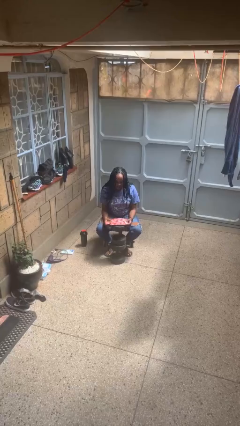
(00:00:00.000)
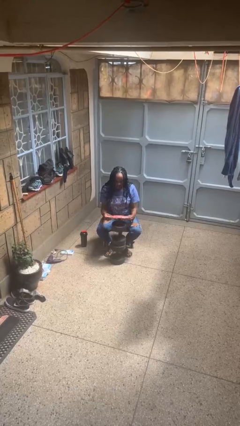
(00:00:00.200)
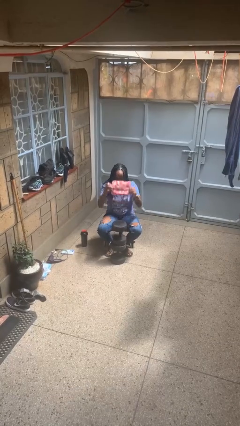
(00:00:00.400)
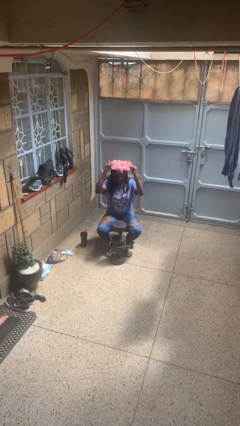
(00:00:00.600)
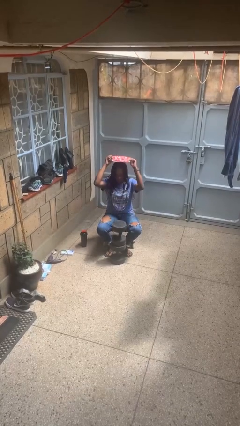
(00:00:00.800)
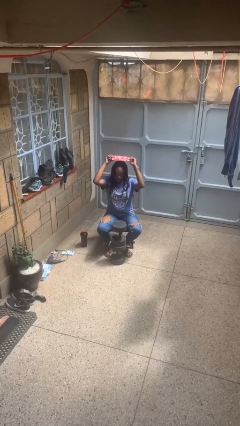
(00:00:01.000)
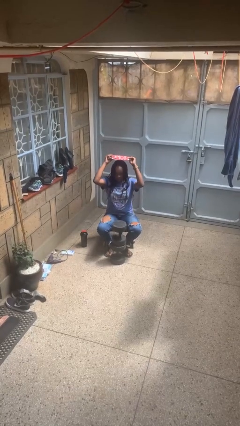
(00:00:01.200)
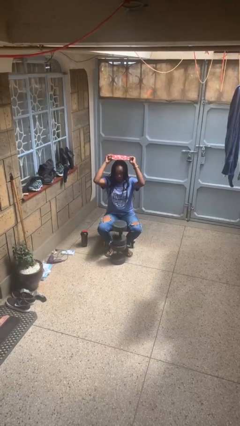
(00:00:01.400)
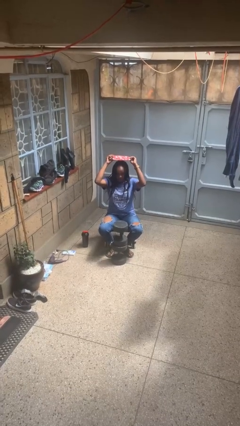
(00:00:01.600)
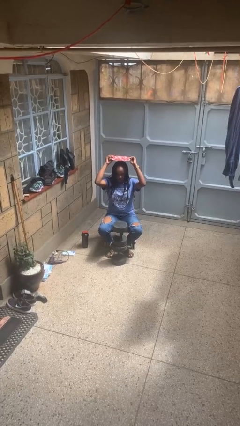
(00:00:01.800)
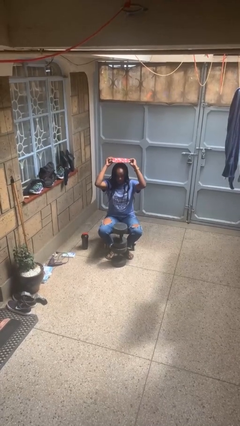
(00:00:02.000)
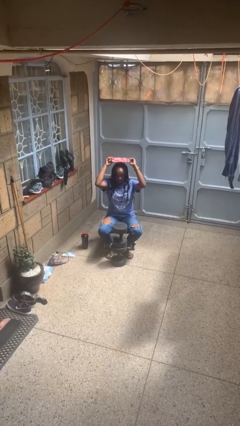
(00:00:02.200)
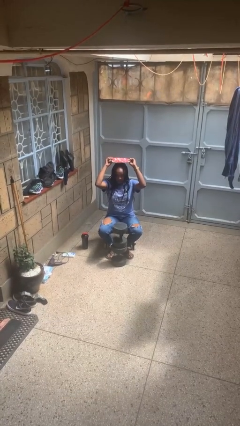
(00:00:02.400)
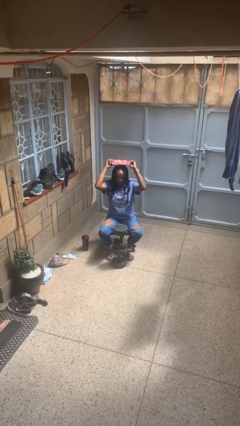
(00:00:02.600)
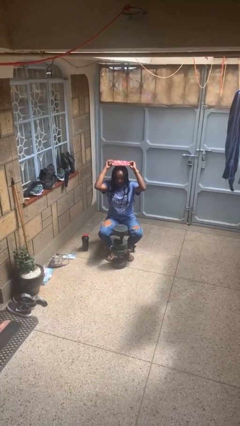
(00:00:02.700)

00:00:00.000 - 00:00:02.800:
person holds object above head

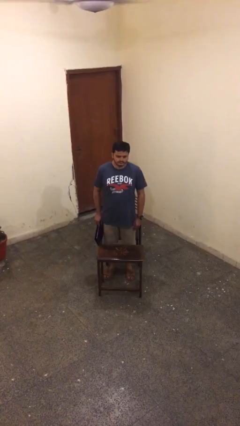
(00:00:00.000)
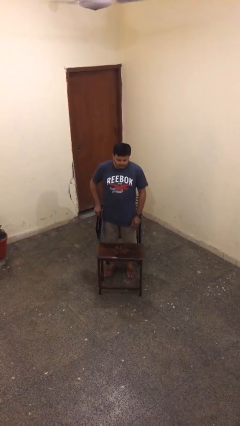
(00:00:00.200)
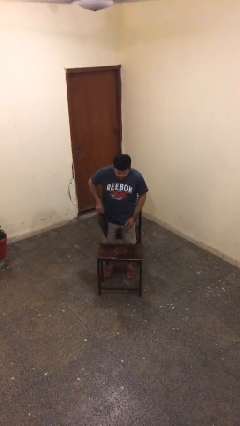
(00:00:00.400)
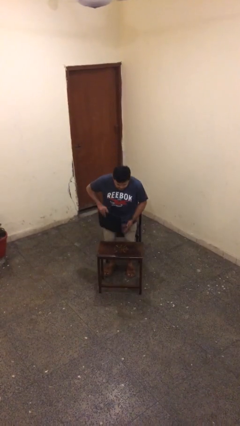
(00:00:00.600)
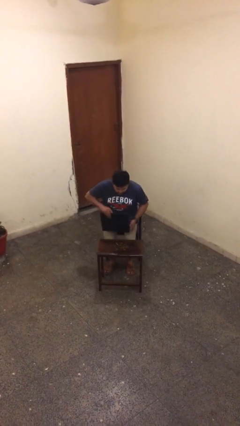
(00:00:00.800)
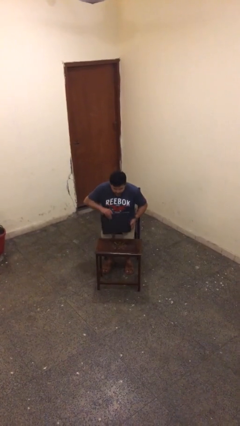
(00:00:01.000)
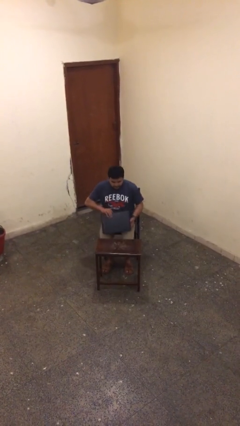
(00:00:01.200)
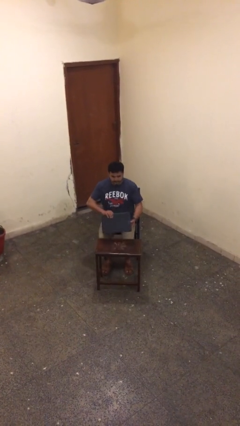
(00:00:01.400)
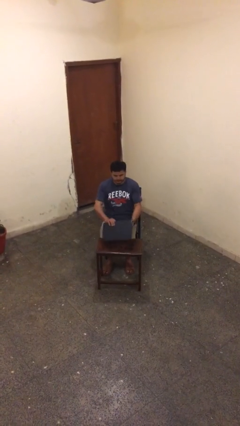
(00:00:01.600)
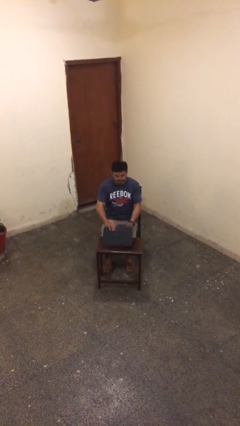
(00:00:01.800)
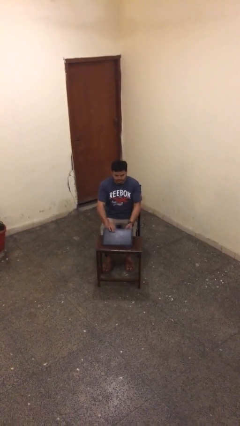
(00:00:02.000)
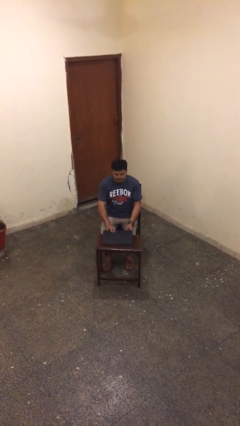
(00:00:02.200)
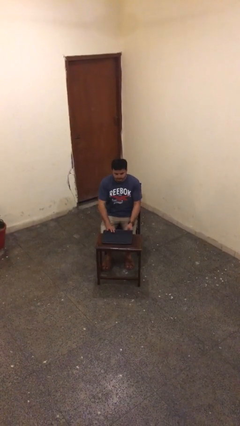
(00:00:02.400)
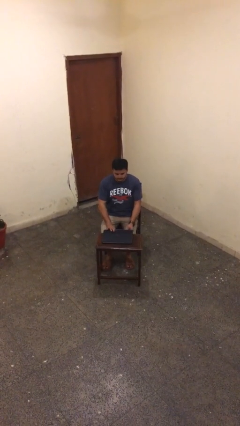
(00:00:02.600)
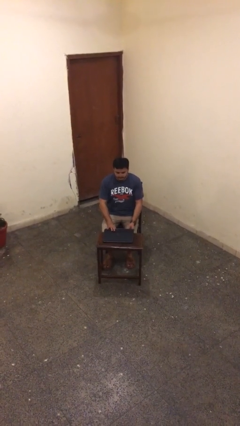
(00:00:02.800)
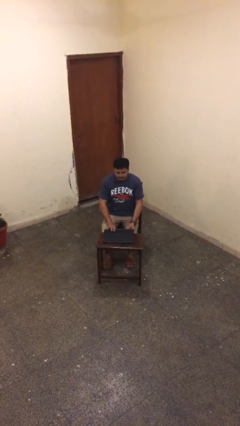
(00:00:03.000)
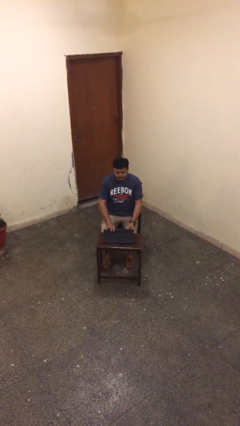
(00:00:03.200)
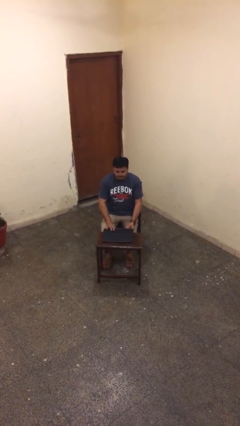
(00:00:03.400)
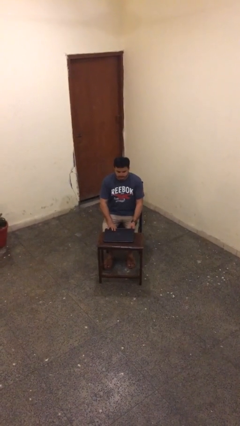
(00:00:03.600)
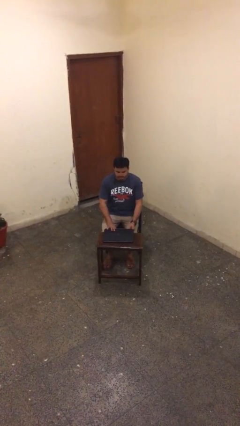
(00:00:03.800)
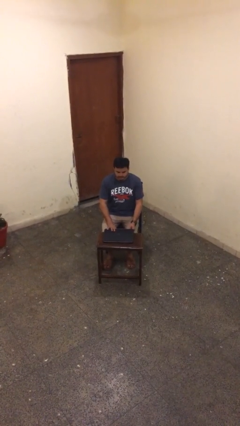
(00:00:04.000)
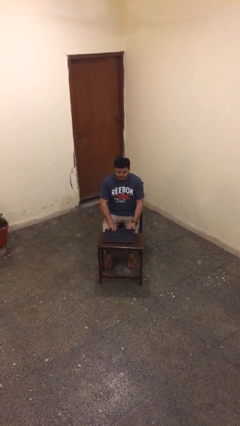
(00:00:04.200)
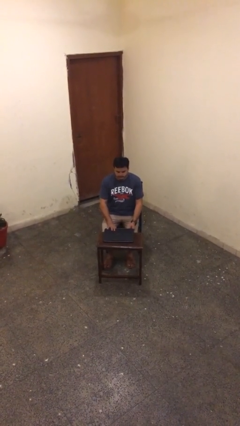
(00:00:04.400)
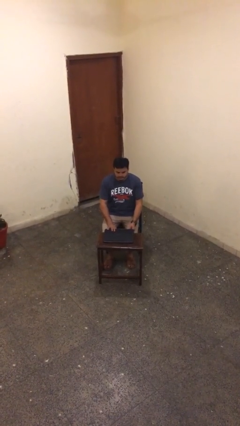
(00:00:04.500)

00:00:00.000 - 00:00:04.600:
person sits down

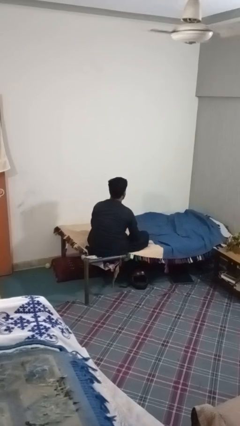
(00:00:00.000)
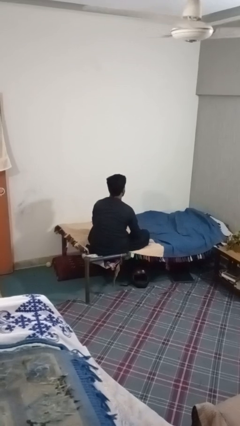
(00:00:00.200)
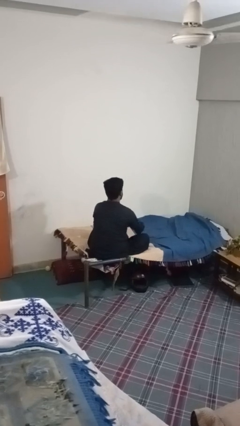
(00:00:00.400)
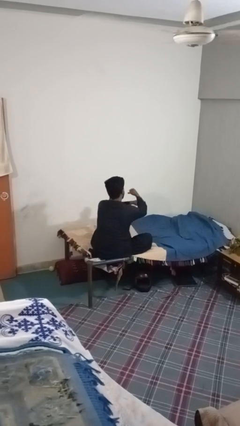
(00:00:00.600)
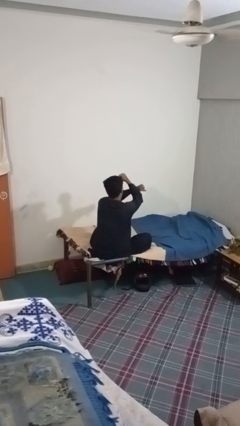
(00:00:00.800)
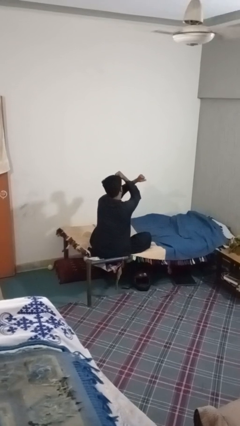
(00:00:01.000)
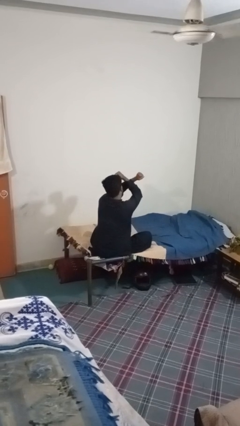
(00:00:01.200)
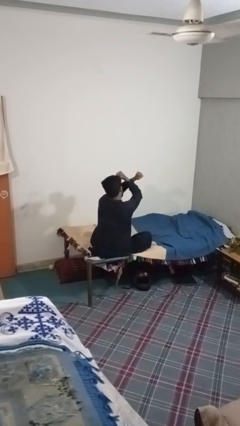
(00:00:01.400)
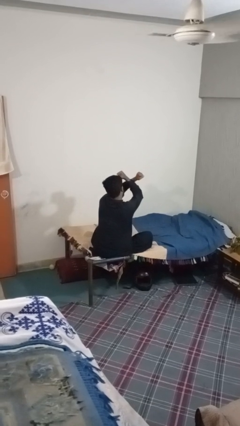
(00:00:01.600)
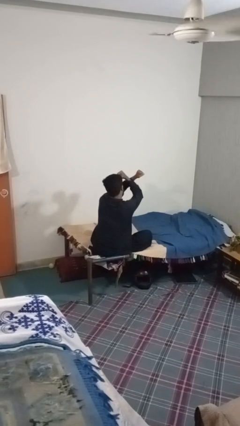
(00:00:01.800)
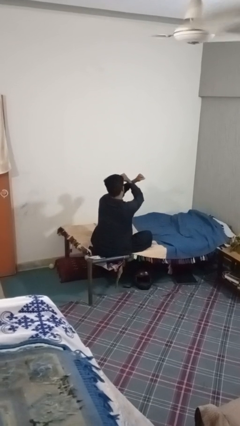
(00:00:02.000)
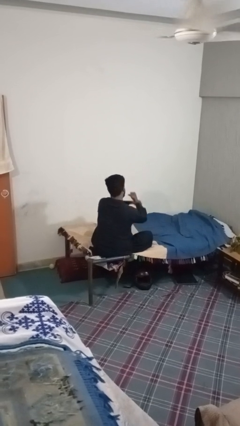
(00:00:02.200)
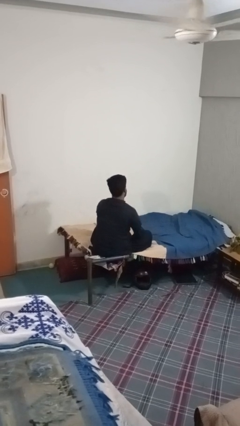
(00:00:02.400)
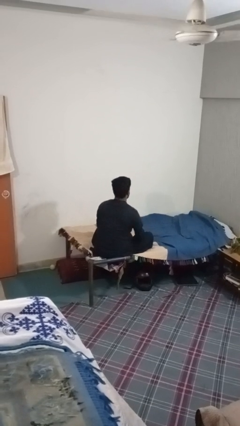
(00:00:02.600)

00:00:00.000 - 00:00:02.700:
person gestures arms x

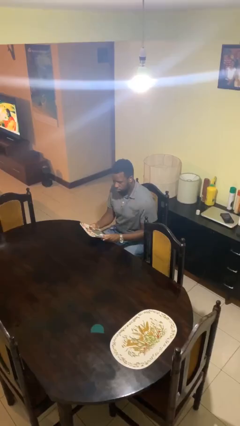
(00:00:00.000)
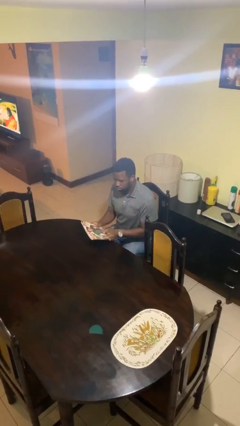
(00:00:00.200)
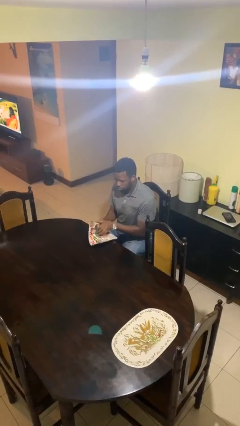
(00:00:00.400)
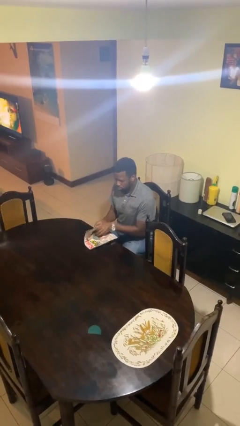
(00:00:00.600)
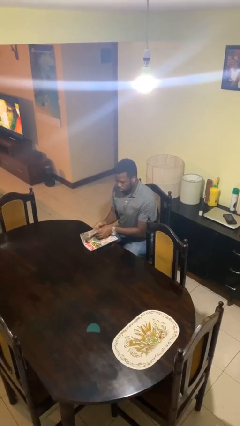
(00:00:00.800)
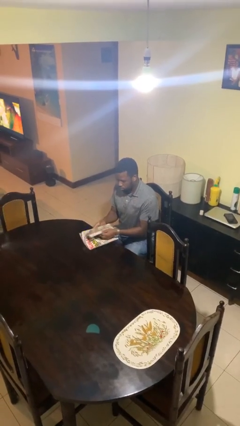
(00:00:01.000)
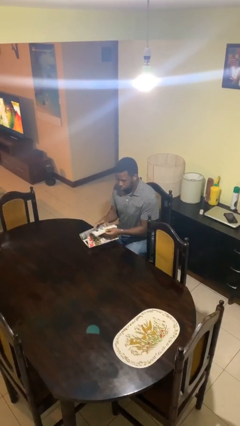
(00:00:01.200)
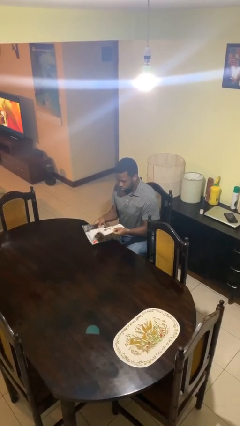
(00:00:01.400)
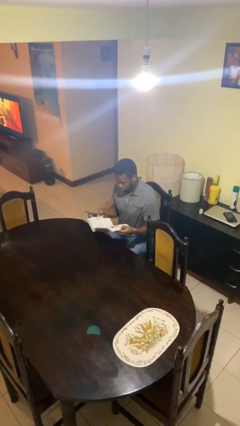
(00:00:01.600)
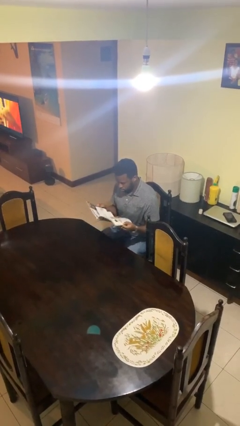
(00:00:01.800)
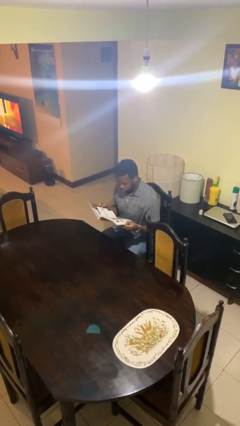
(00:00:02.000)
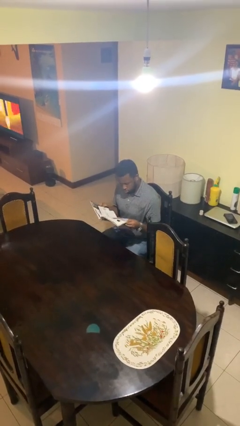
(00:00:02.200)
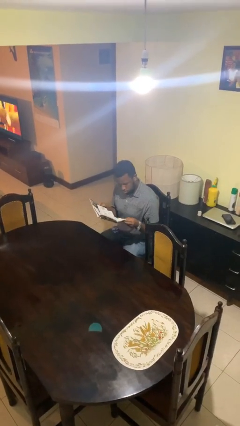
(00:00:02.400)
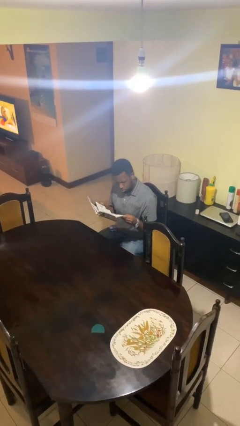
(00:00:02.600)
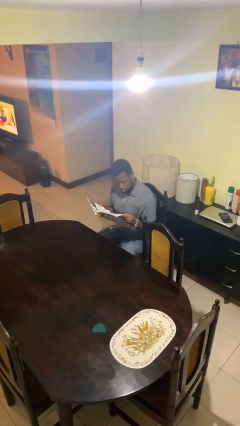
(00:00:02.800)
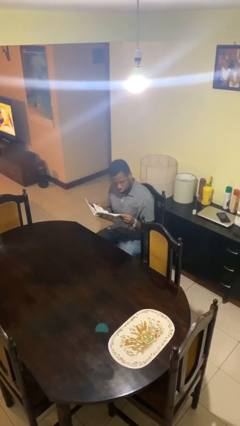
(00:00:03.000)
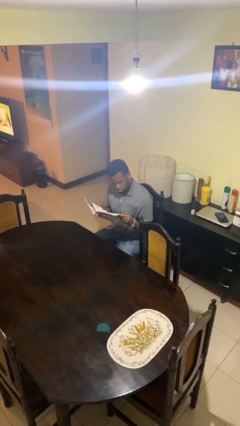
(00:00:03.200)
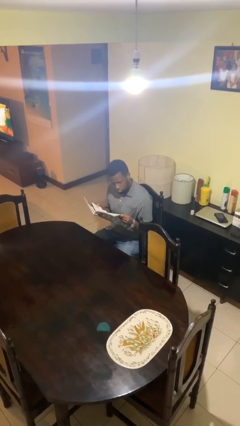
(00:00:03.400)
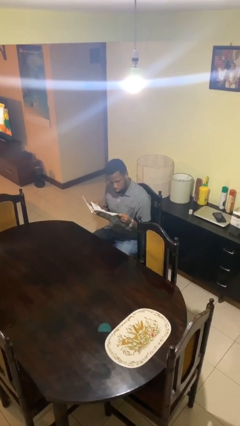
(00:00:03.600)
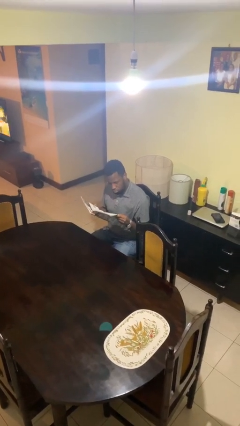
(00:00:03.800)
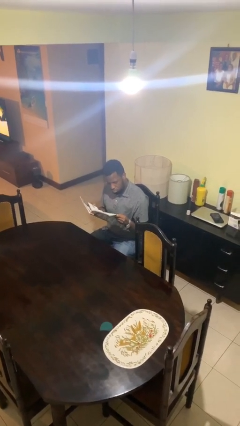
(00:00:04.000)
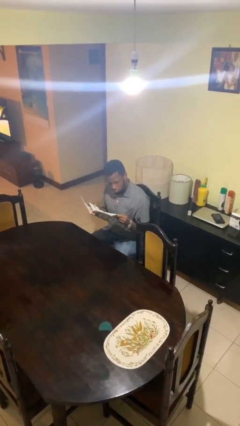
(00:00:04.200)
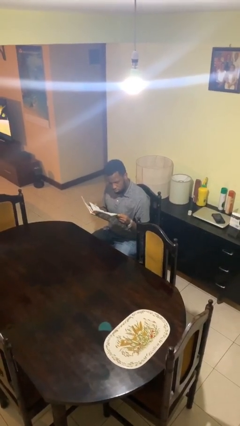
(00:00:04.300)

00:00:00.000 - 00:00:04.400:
person reads document

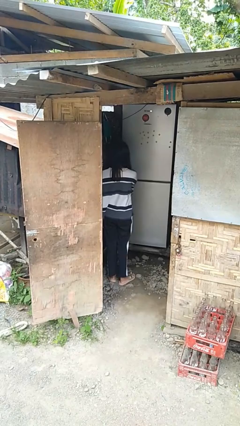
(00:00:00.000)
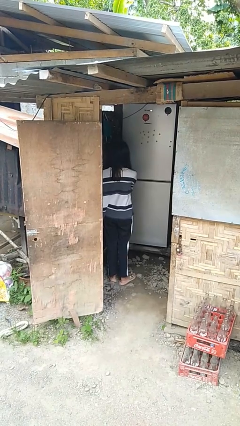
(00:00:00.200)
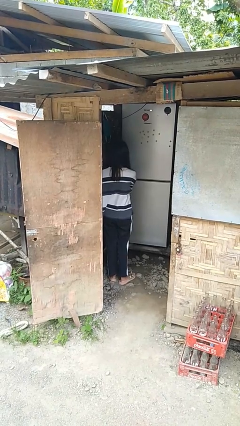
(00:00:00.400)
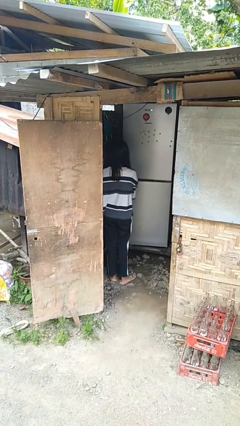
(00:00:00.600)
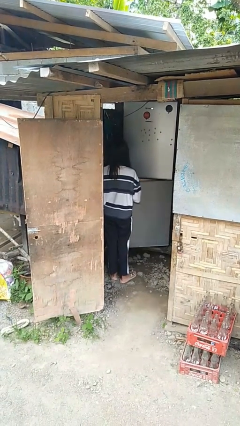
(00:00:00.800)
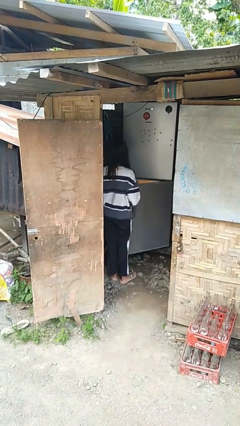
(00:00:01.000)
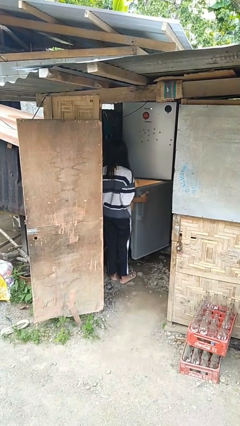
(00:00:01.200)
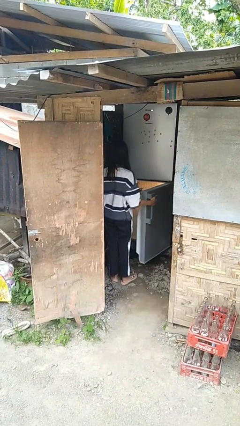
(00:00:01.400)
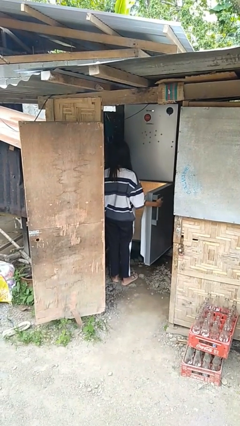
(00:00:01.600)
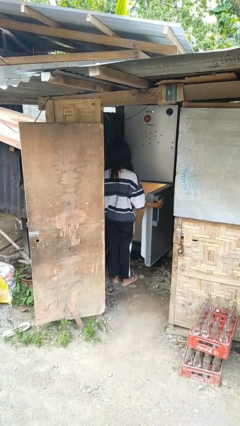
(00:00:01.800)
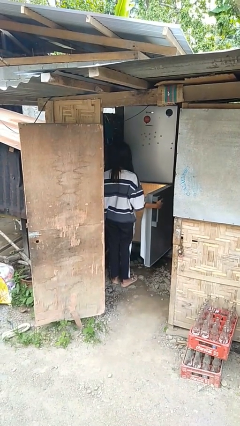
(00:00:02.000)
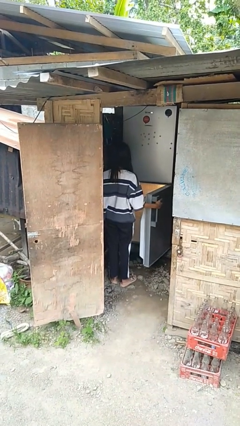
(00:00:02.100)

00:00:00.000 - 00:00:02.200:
person opens refrigerator

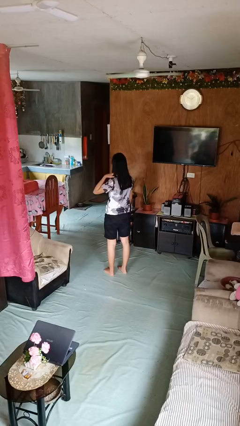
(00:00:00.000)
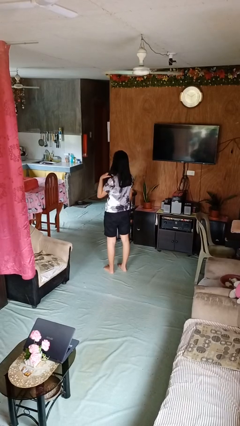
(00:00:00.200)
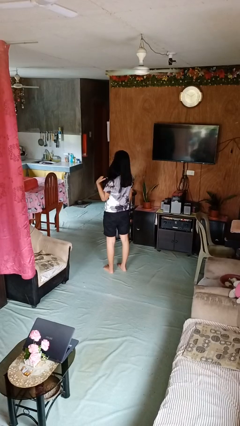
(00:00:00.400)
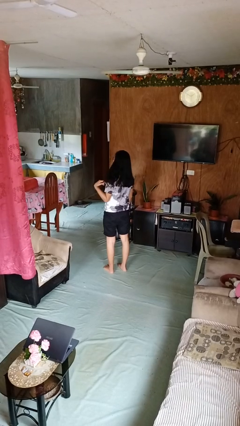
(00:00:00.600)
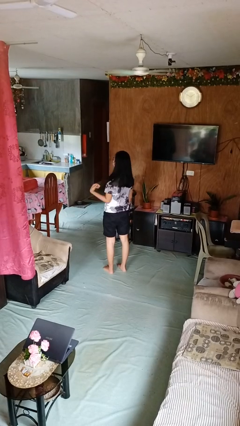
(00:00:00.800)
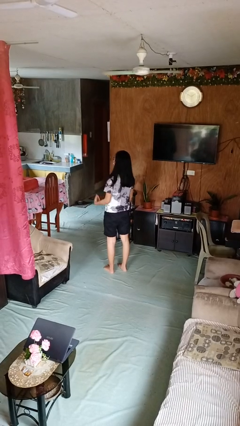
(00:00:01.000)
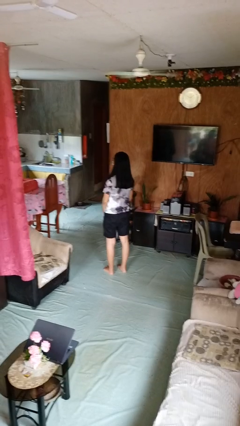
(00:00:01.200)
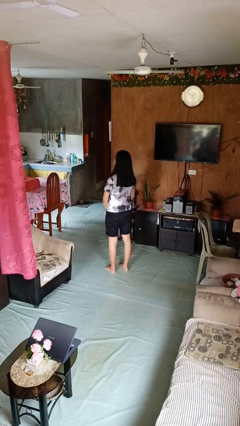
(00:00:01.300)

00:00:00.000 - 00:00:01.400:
person strokes hair
